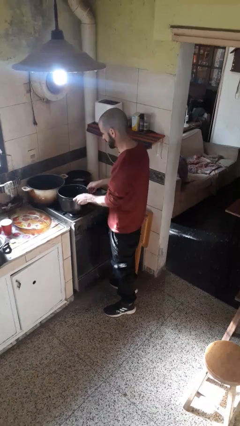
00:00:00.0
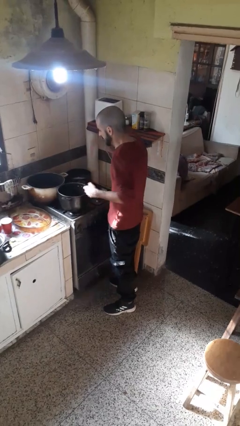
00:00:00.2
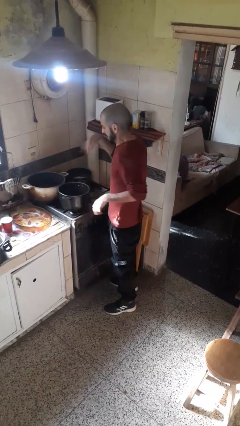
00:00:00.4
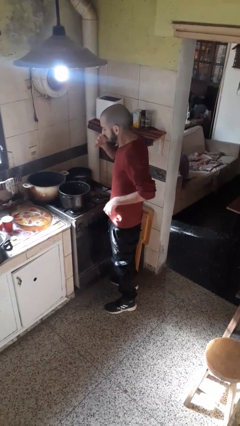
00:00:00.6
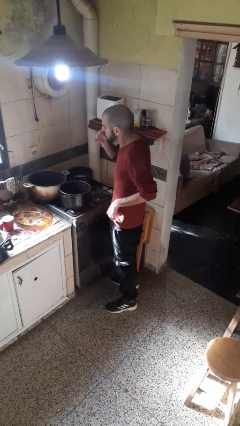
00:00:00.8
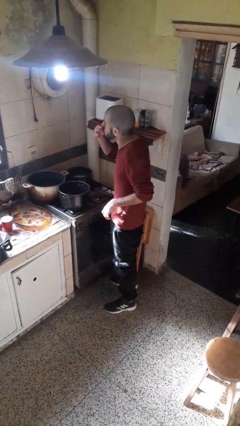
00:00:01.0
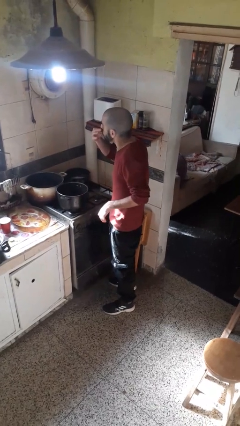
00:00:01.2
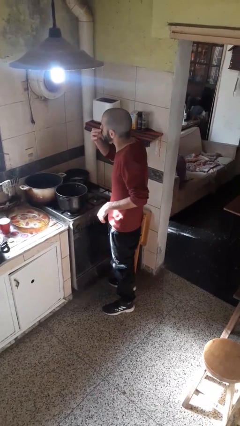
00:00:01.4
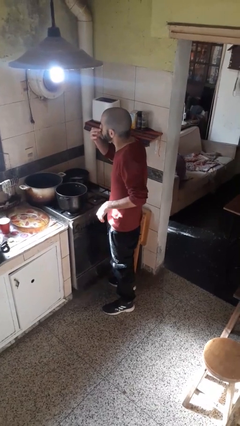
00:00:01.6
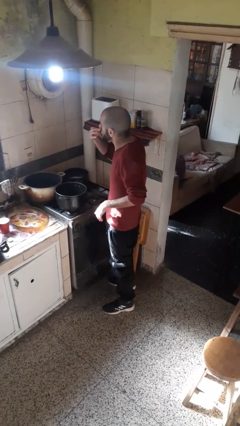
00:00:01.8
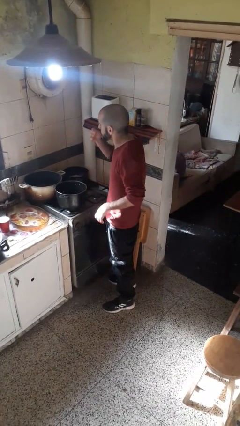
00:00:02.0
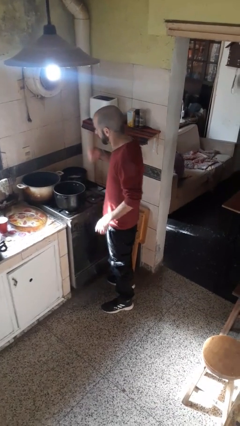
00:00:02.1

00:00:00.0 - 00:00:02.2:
person burns hand

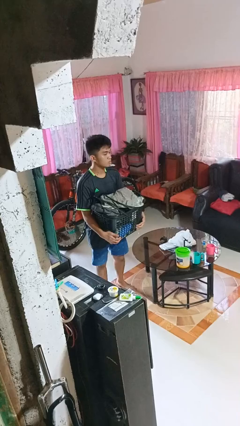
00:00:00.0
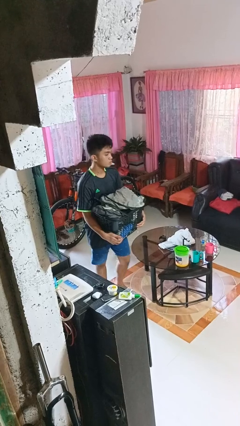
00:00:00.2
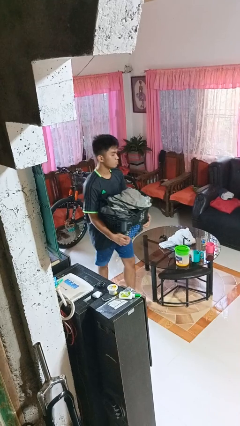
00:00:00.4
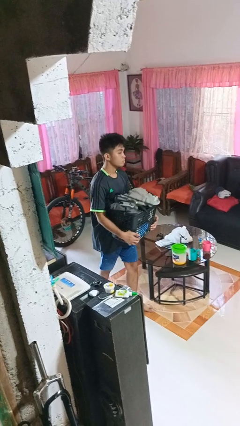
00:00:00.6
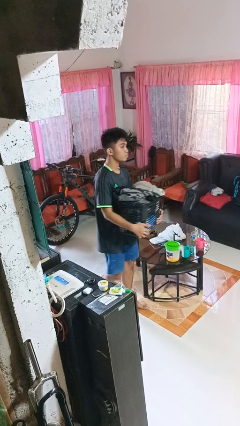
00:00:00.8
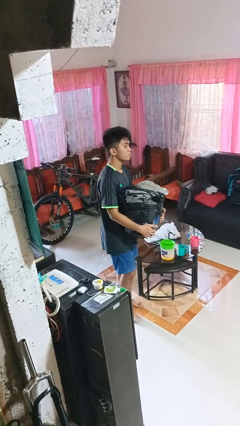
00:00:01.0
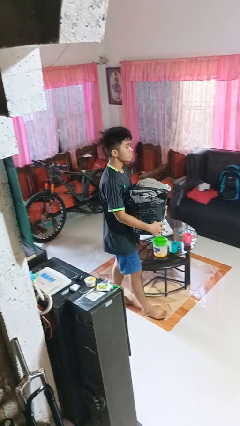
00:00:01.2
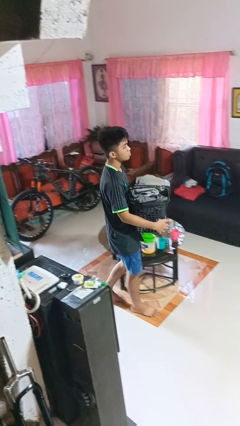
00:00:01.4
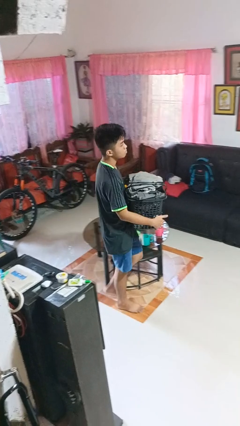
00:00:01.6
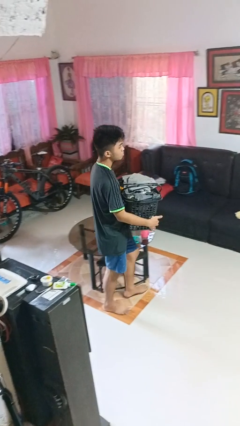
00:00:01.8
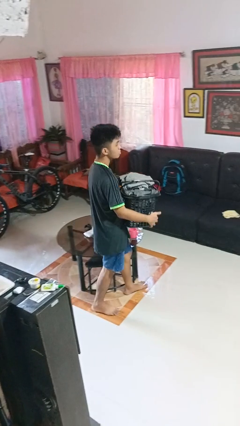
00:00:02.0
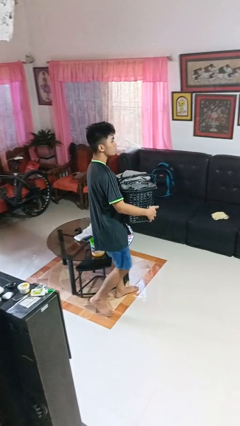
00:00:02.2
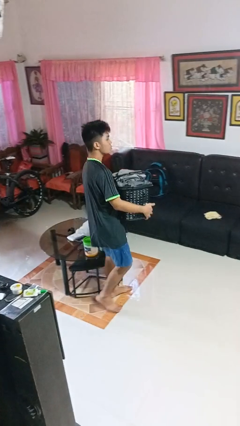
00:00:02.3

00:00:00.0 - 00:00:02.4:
person carries laundry basket

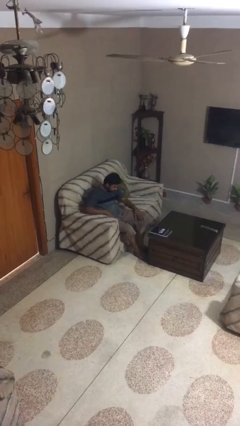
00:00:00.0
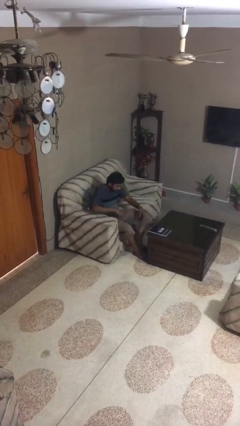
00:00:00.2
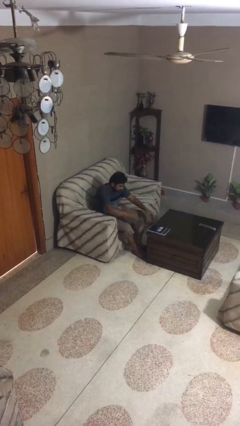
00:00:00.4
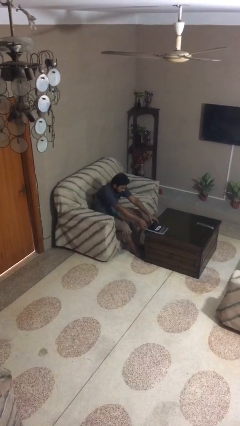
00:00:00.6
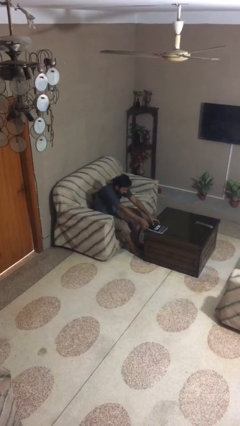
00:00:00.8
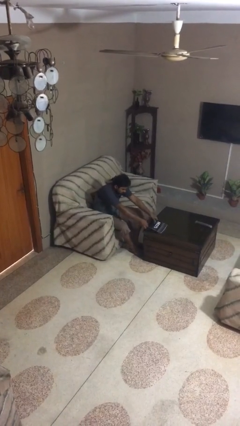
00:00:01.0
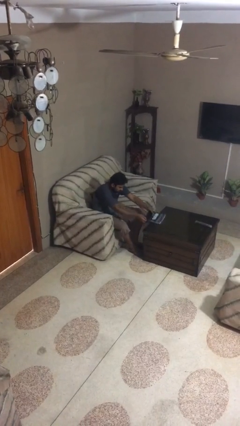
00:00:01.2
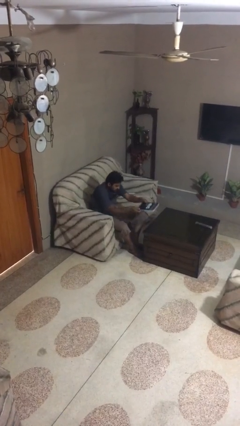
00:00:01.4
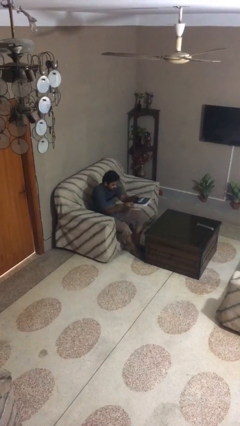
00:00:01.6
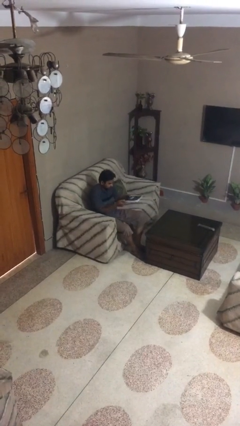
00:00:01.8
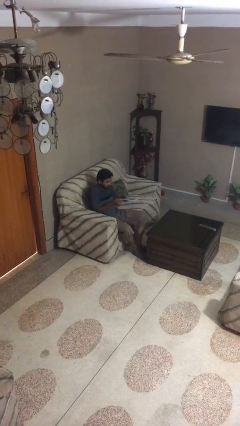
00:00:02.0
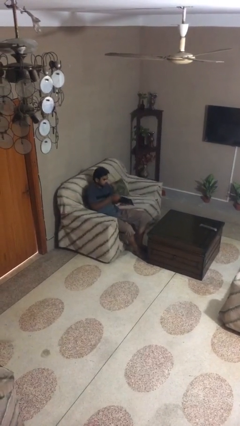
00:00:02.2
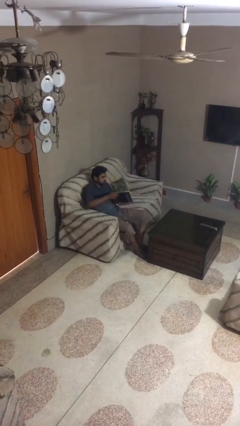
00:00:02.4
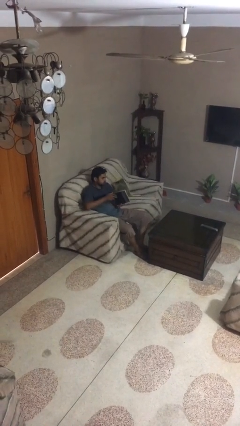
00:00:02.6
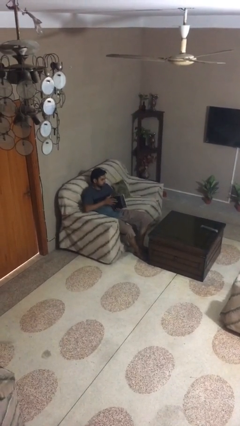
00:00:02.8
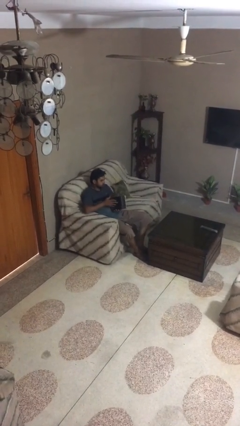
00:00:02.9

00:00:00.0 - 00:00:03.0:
person picks up object from table

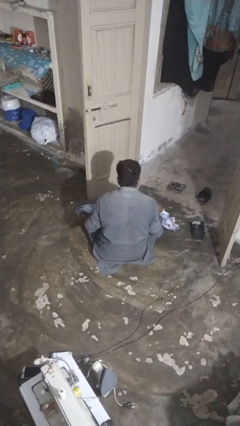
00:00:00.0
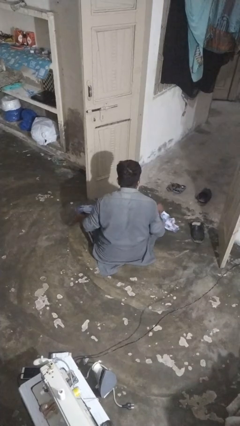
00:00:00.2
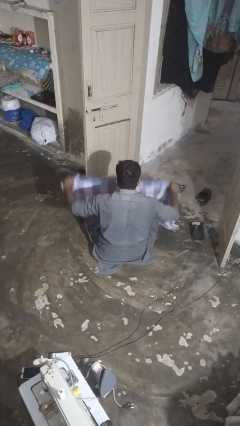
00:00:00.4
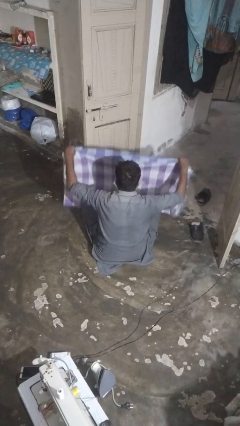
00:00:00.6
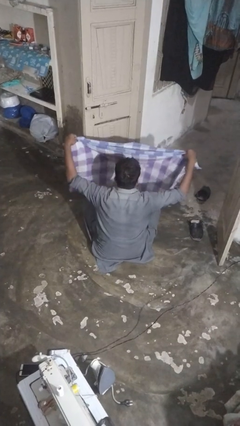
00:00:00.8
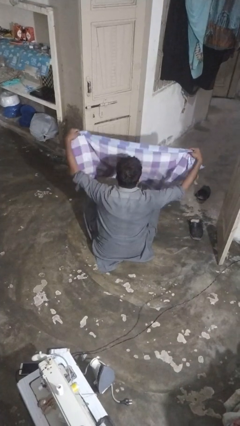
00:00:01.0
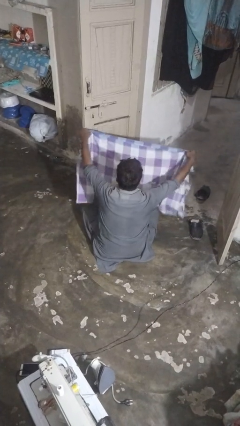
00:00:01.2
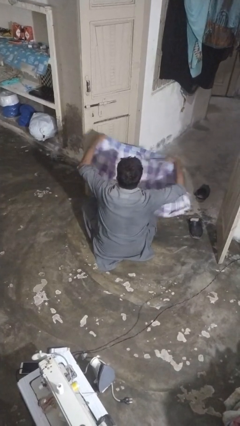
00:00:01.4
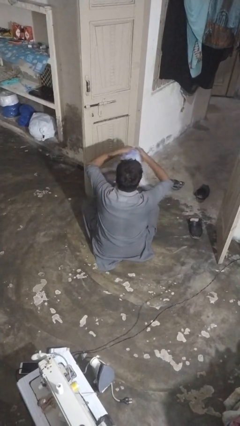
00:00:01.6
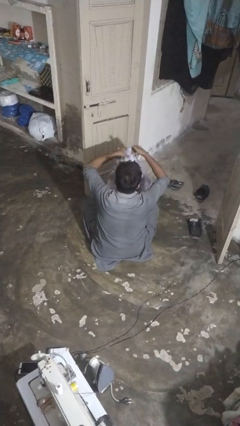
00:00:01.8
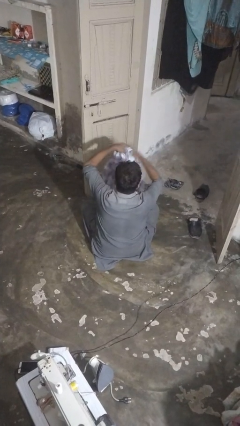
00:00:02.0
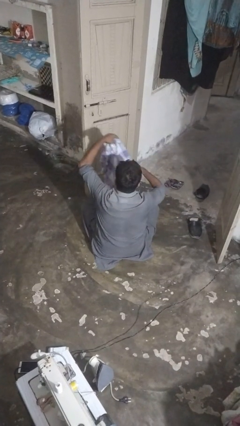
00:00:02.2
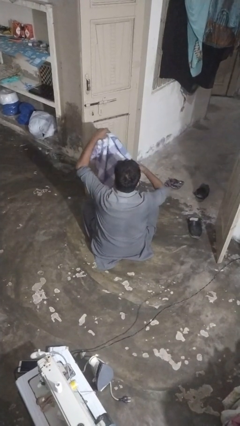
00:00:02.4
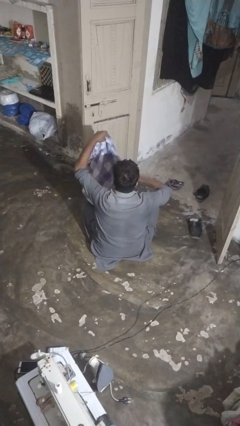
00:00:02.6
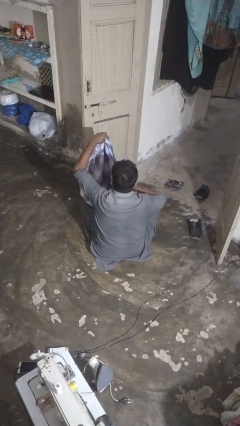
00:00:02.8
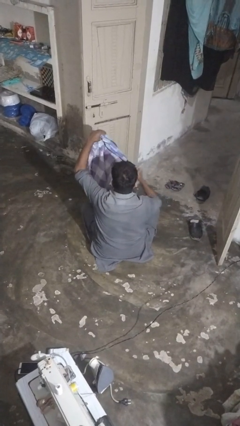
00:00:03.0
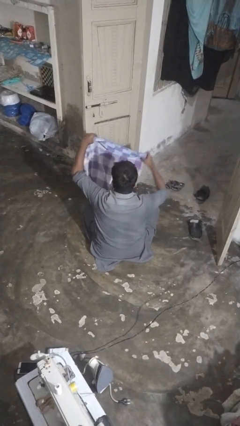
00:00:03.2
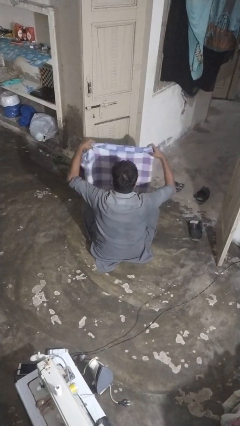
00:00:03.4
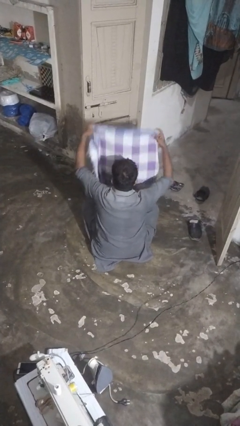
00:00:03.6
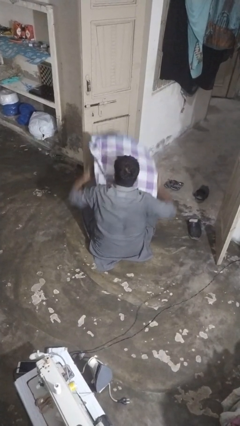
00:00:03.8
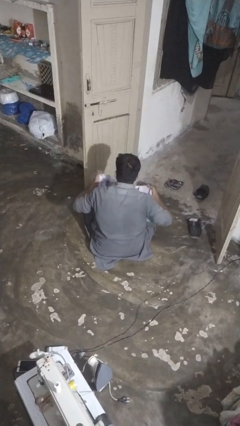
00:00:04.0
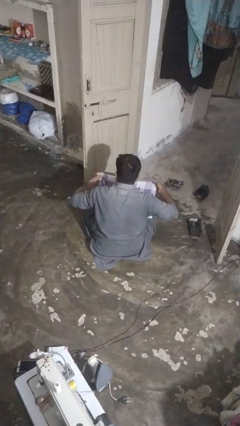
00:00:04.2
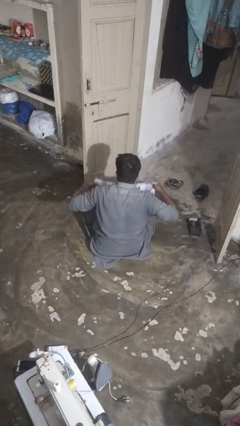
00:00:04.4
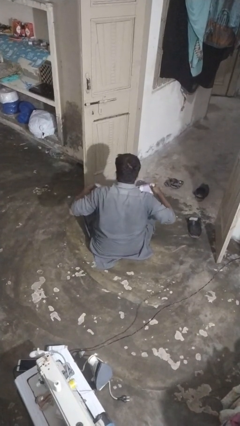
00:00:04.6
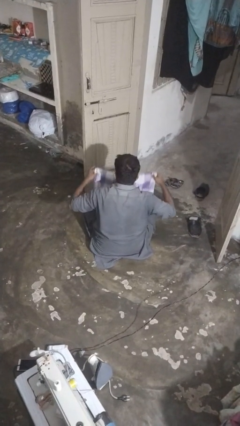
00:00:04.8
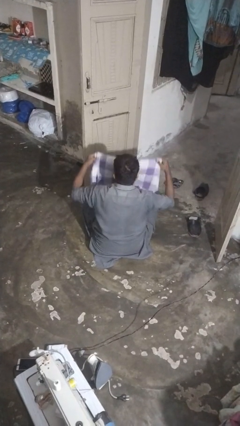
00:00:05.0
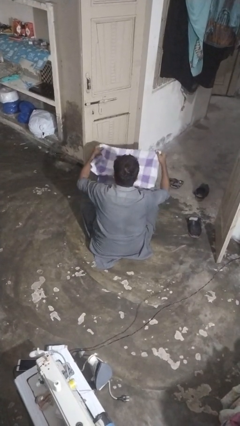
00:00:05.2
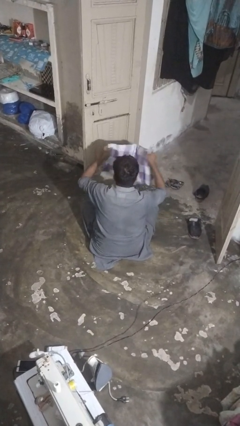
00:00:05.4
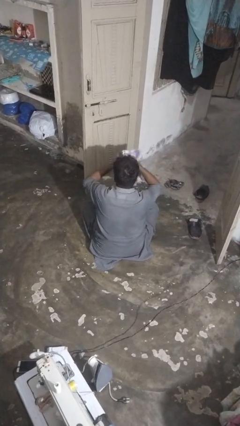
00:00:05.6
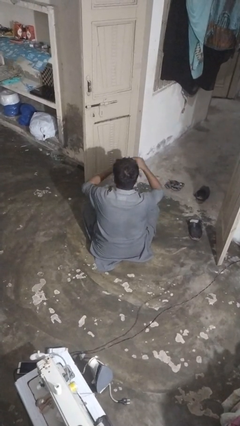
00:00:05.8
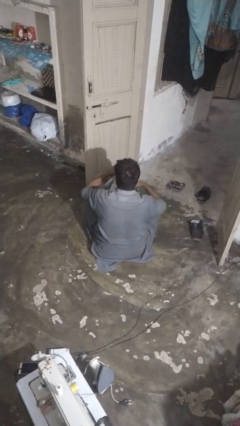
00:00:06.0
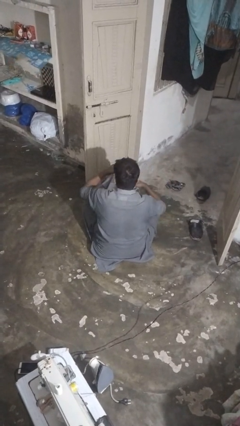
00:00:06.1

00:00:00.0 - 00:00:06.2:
person folds blanket

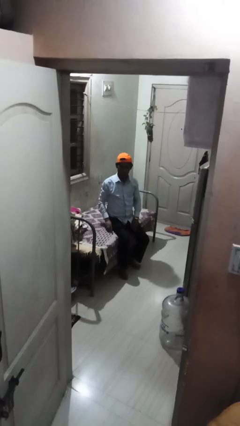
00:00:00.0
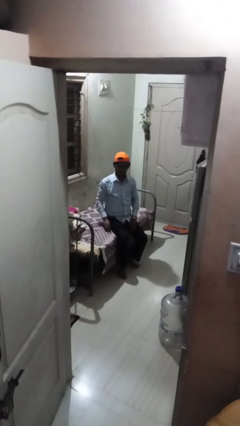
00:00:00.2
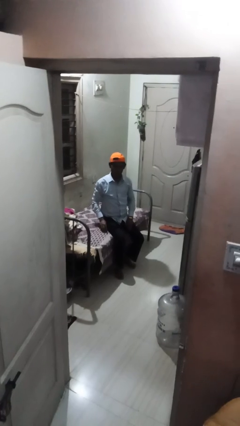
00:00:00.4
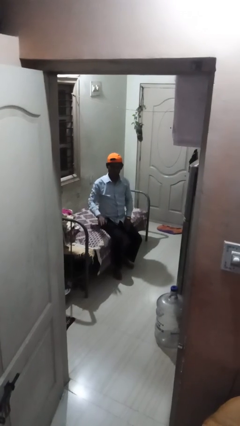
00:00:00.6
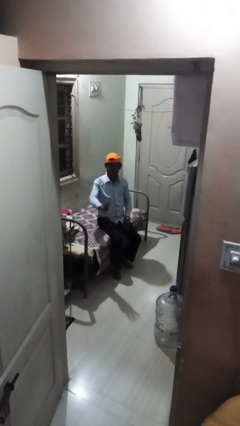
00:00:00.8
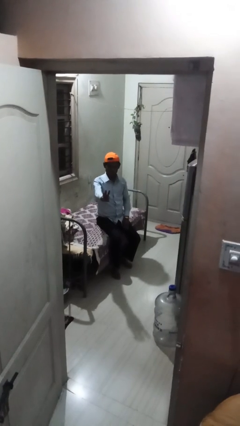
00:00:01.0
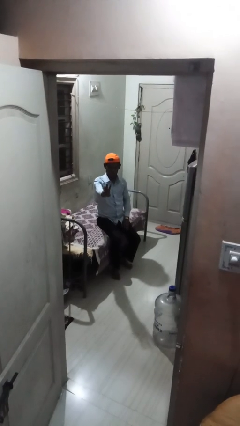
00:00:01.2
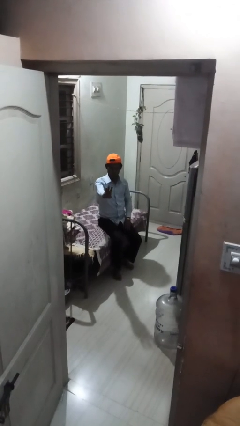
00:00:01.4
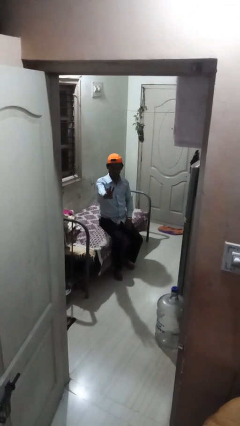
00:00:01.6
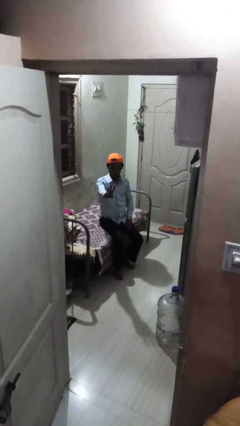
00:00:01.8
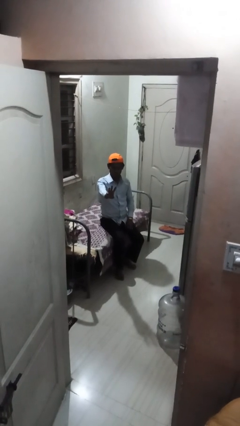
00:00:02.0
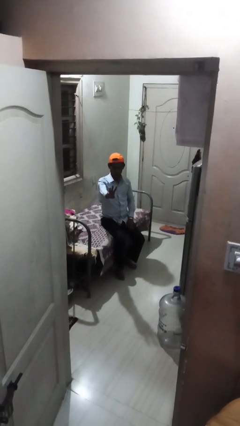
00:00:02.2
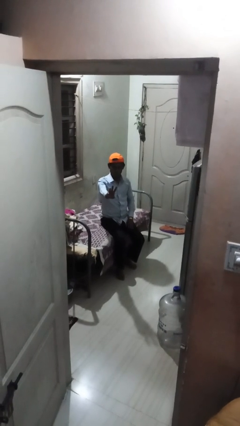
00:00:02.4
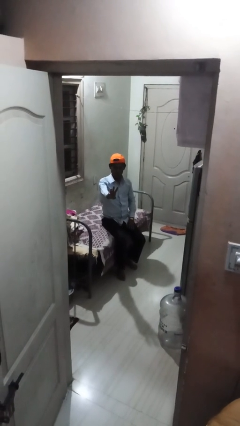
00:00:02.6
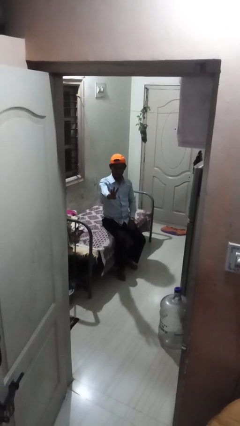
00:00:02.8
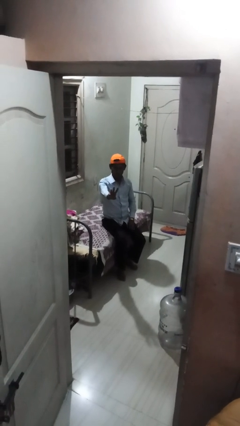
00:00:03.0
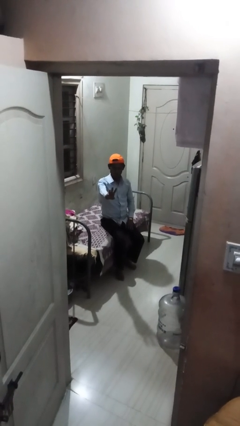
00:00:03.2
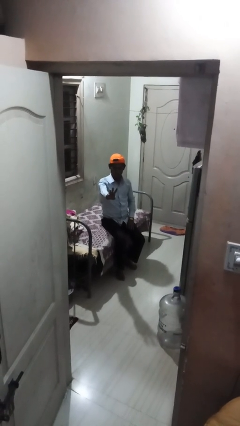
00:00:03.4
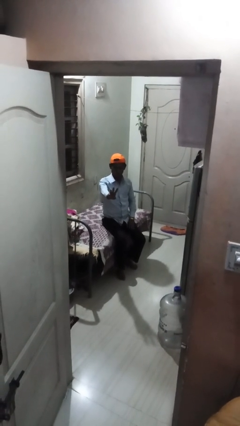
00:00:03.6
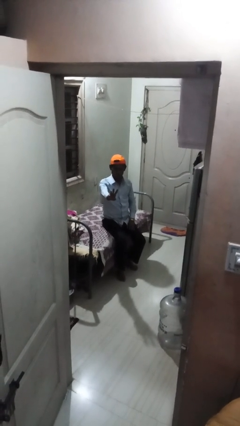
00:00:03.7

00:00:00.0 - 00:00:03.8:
person gestures number three
